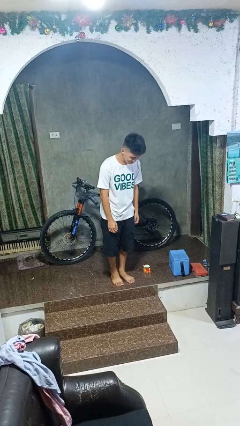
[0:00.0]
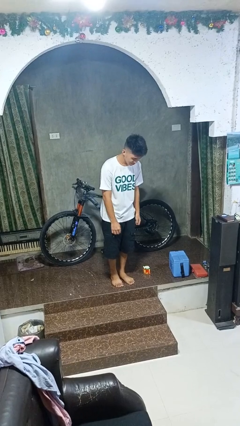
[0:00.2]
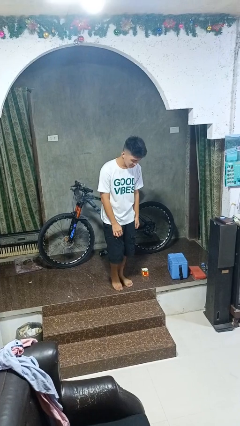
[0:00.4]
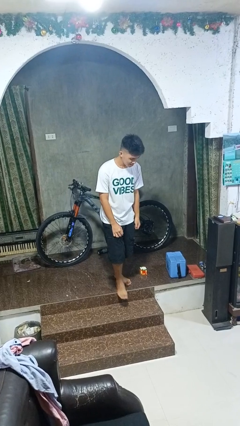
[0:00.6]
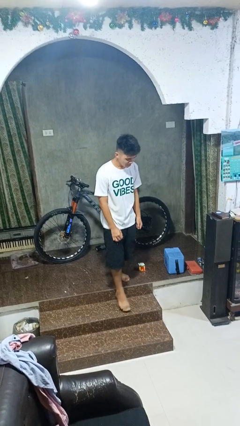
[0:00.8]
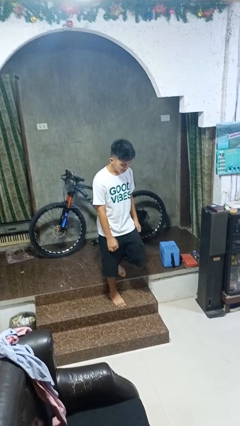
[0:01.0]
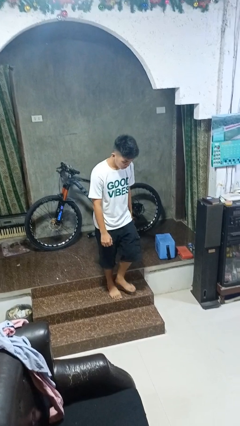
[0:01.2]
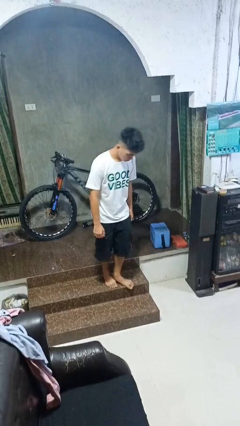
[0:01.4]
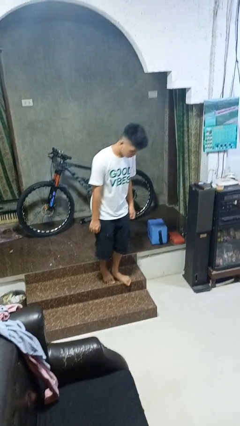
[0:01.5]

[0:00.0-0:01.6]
person climbs down stairs

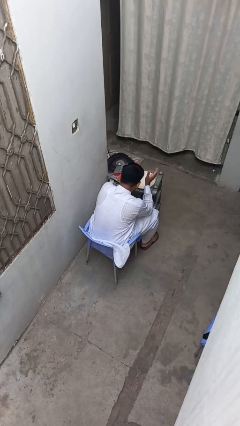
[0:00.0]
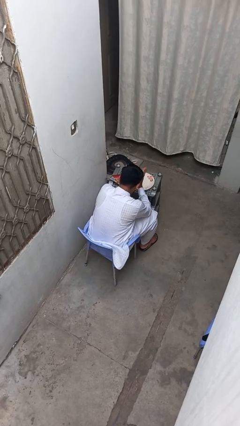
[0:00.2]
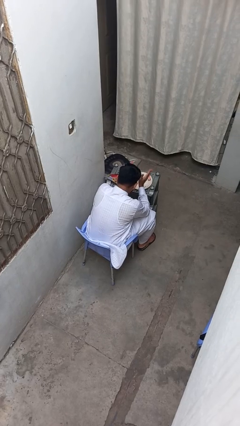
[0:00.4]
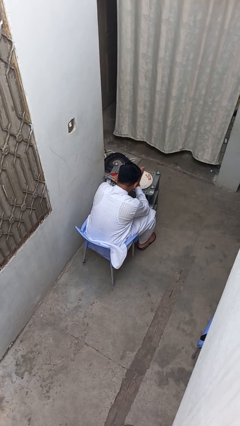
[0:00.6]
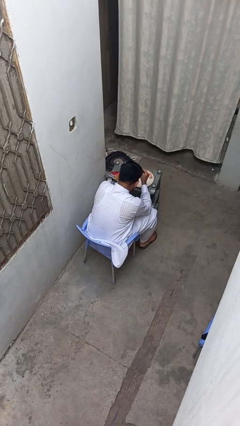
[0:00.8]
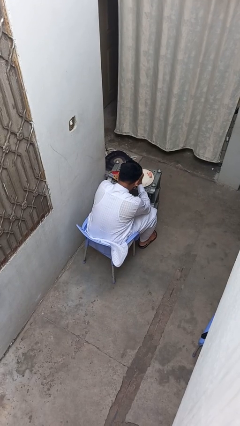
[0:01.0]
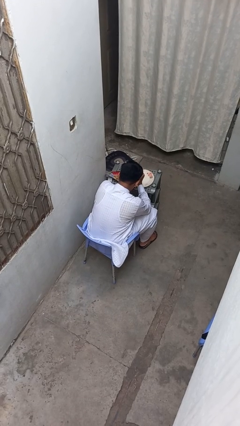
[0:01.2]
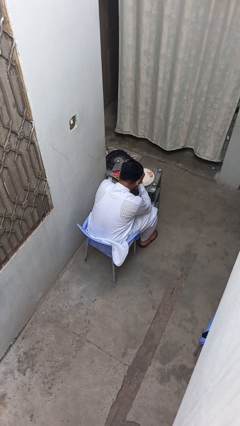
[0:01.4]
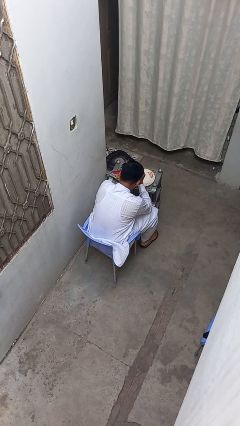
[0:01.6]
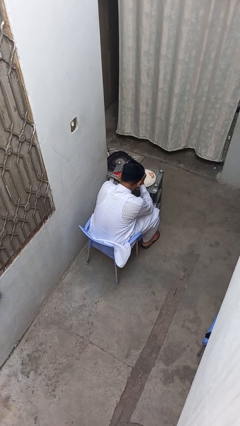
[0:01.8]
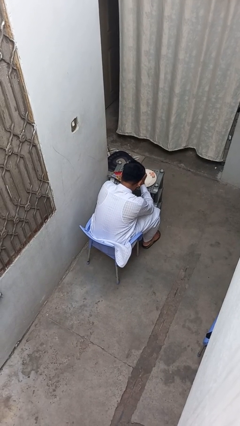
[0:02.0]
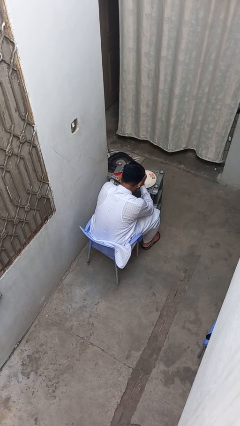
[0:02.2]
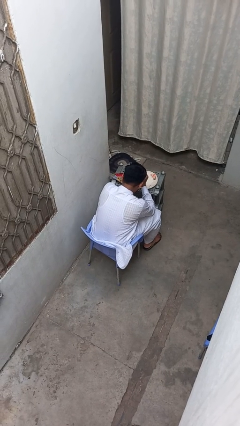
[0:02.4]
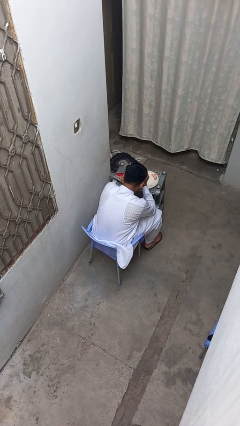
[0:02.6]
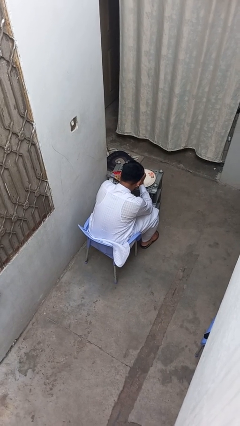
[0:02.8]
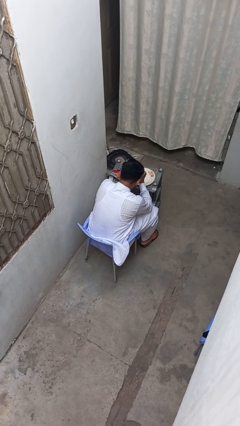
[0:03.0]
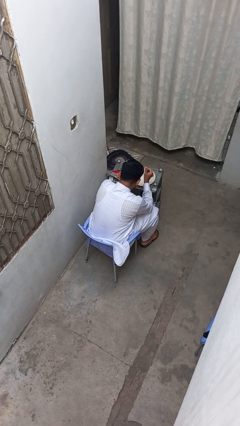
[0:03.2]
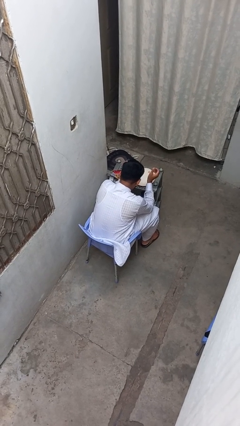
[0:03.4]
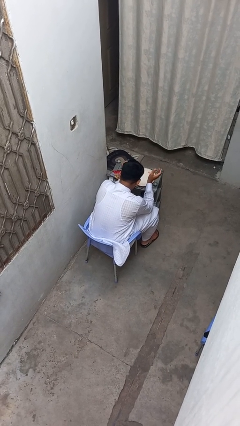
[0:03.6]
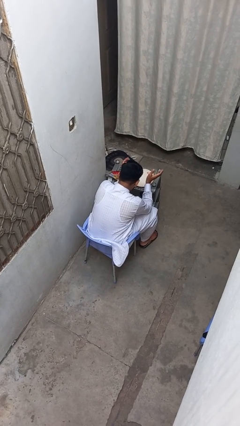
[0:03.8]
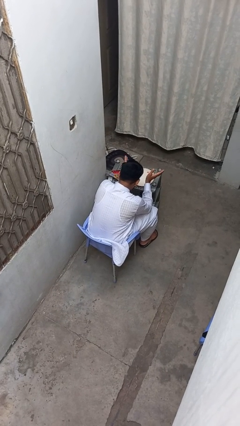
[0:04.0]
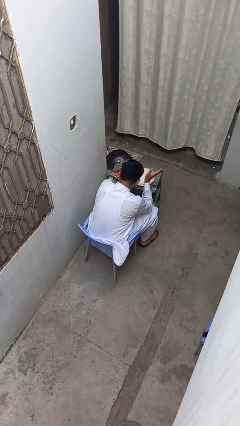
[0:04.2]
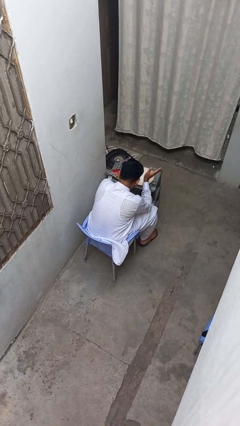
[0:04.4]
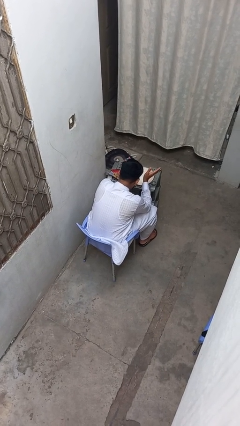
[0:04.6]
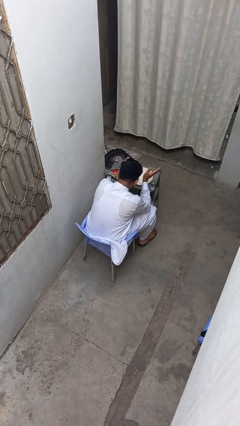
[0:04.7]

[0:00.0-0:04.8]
person claps hands

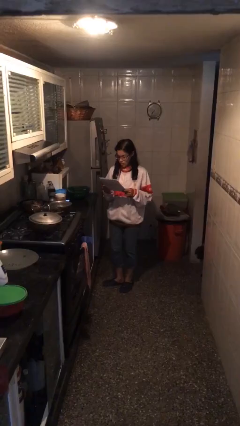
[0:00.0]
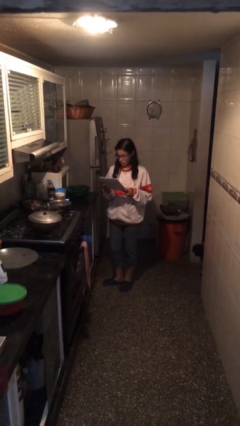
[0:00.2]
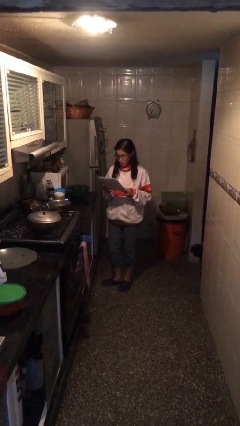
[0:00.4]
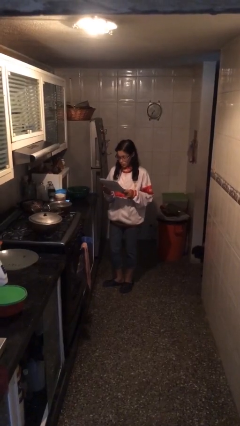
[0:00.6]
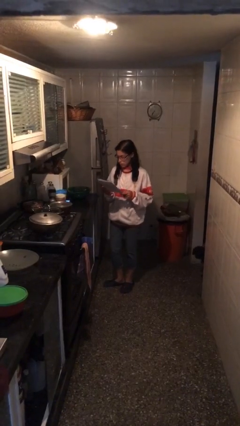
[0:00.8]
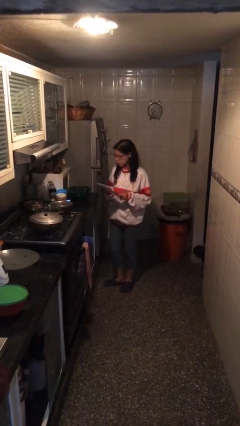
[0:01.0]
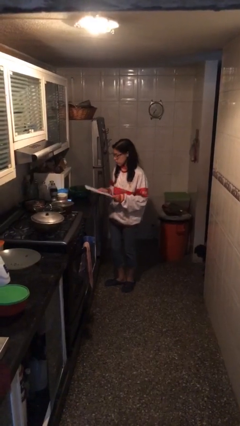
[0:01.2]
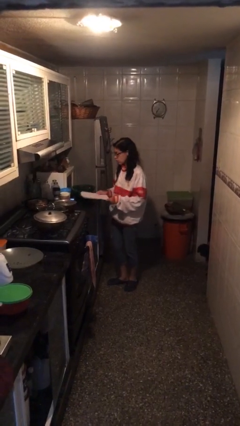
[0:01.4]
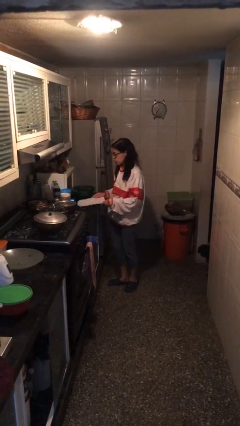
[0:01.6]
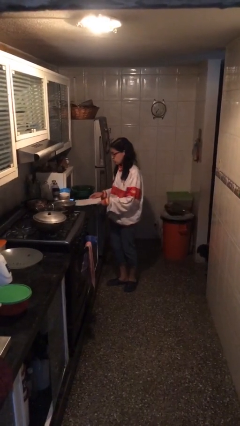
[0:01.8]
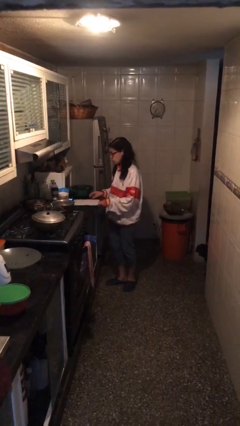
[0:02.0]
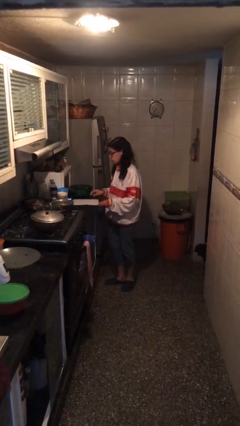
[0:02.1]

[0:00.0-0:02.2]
person puts down object on table

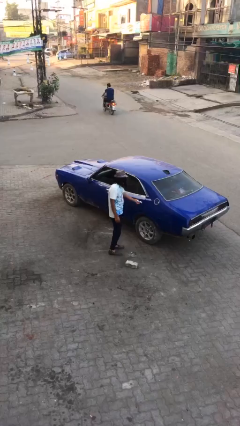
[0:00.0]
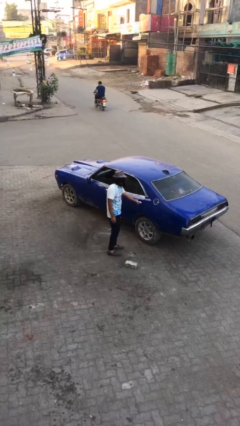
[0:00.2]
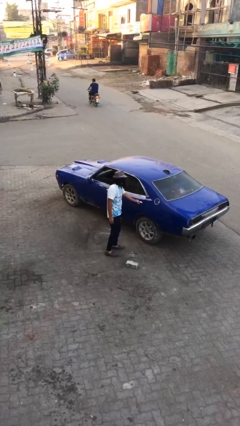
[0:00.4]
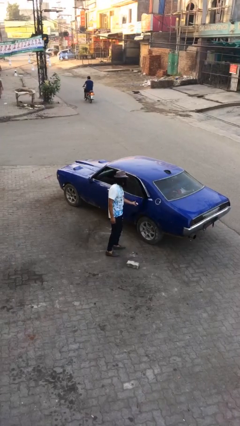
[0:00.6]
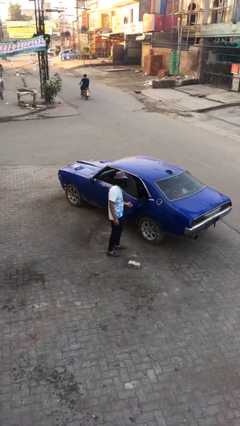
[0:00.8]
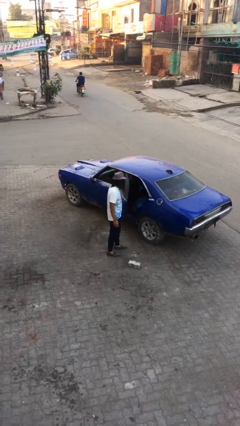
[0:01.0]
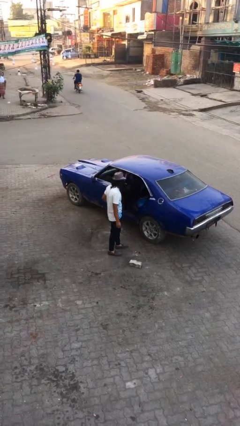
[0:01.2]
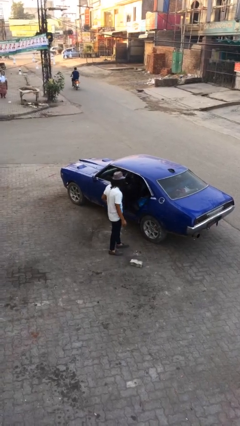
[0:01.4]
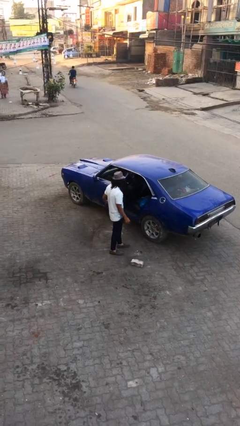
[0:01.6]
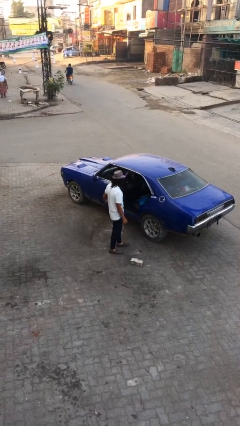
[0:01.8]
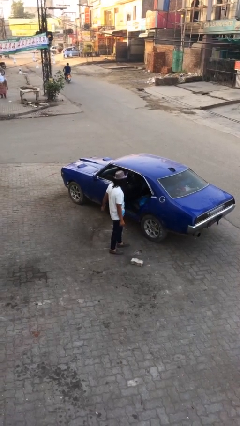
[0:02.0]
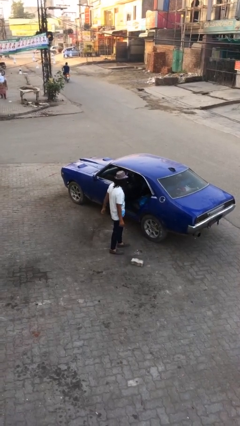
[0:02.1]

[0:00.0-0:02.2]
person opens car door

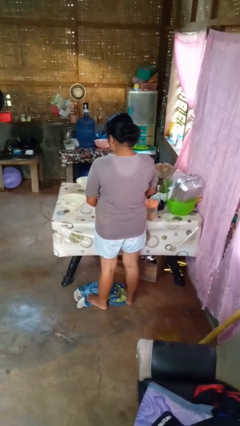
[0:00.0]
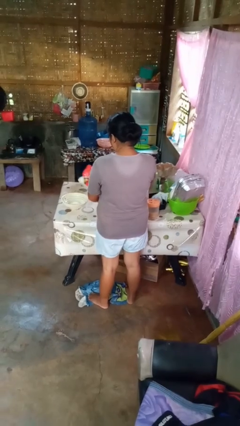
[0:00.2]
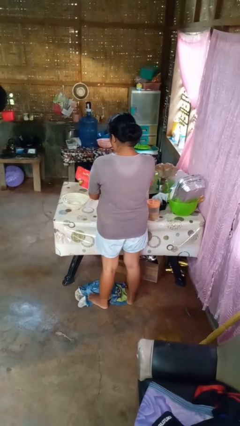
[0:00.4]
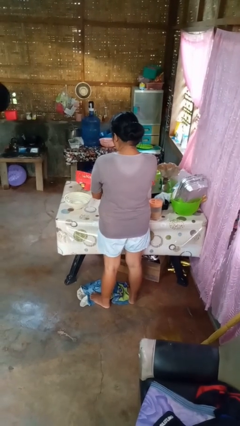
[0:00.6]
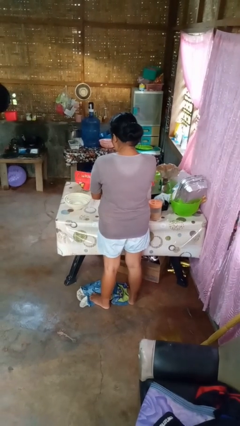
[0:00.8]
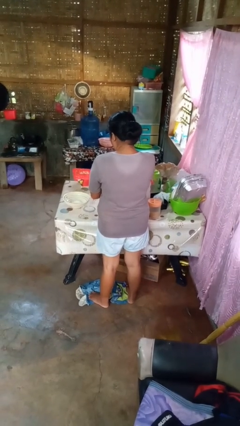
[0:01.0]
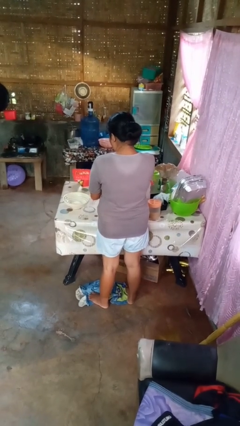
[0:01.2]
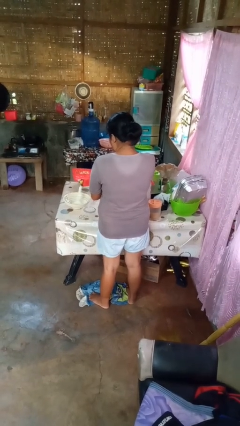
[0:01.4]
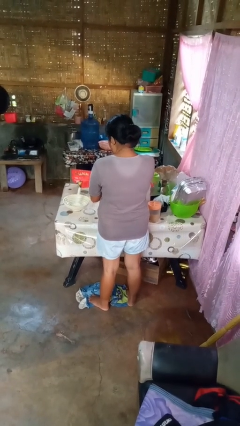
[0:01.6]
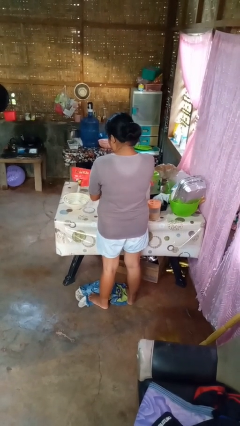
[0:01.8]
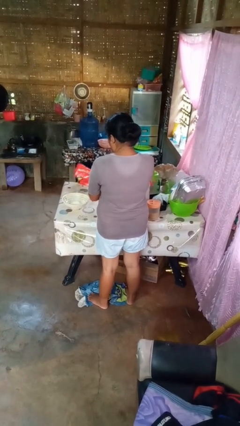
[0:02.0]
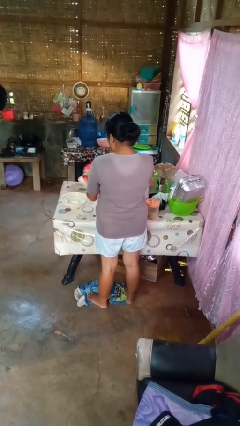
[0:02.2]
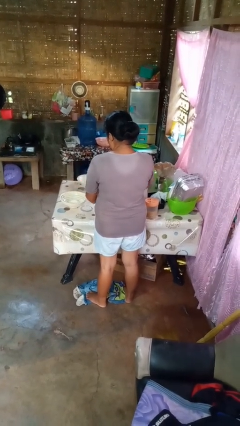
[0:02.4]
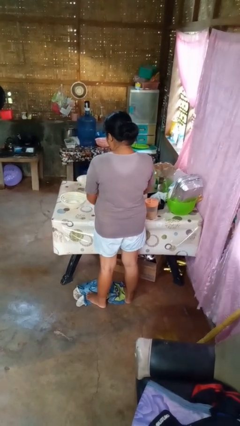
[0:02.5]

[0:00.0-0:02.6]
person pours into bowl

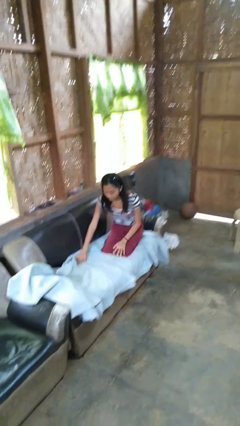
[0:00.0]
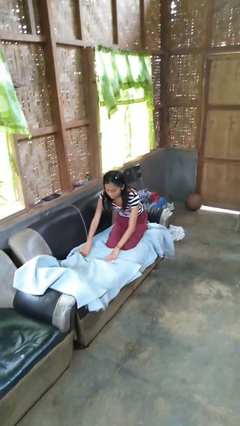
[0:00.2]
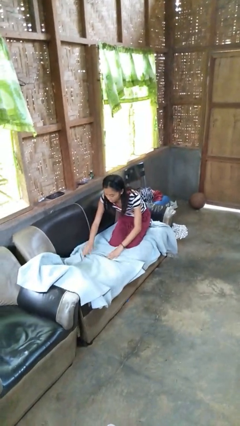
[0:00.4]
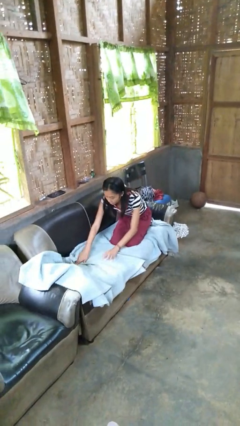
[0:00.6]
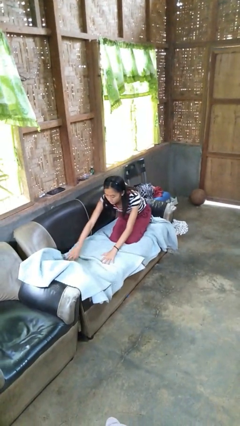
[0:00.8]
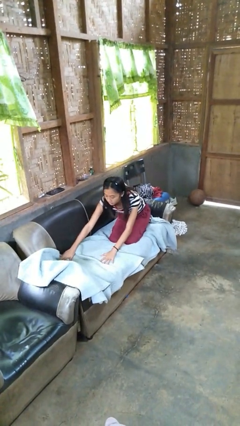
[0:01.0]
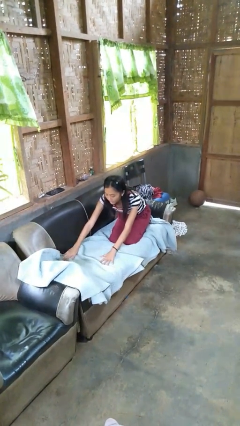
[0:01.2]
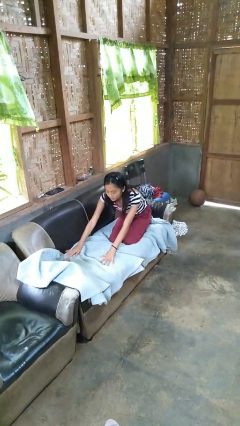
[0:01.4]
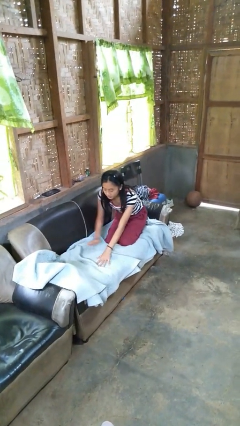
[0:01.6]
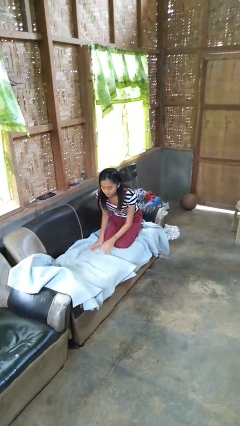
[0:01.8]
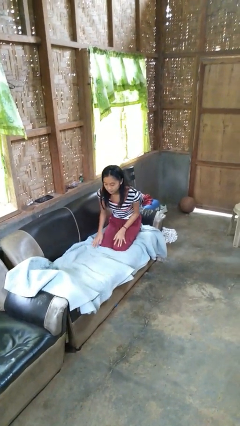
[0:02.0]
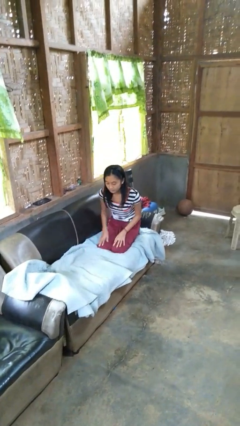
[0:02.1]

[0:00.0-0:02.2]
person searches in couch

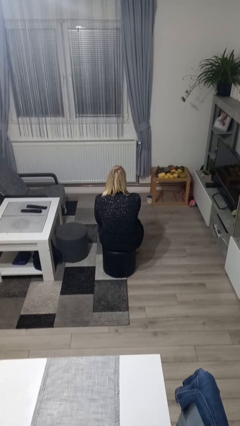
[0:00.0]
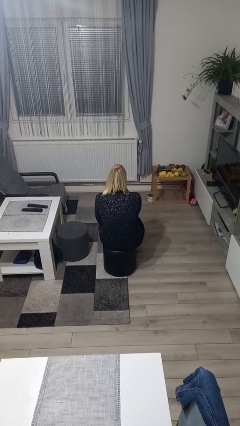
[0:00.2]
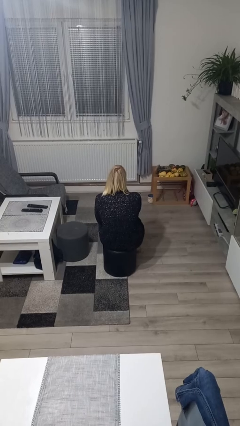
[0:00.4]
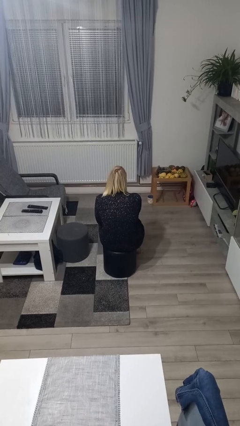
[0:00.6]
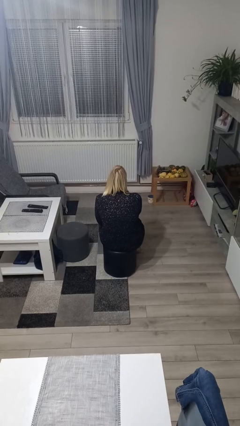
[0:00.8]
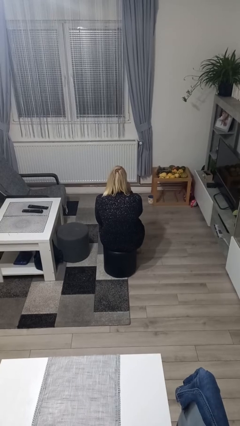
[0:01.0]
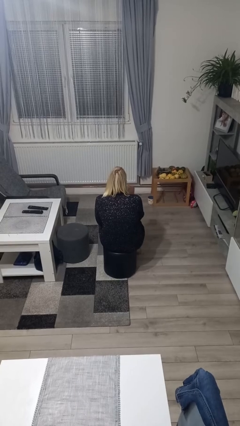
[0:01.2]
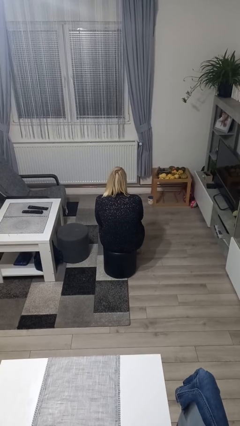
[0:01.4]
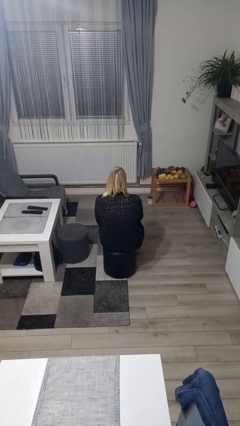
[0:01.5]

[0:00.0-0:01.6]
person strokes chin
